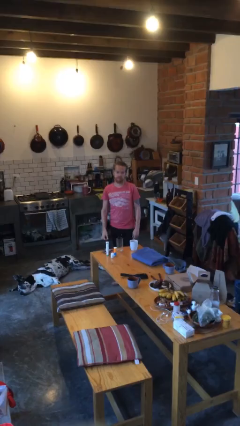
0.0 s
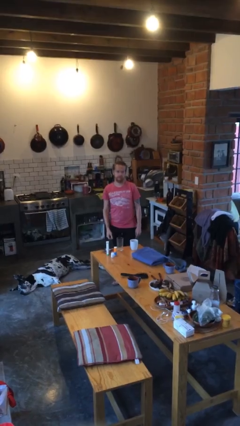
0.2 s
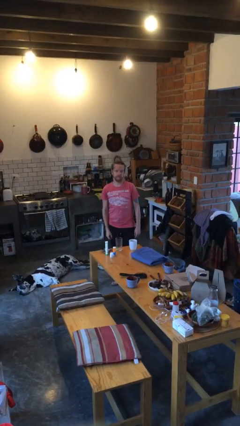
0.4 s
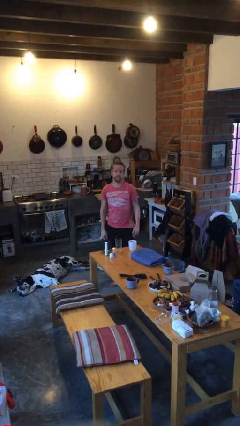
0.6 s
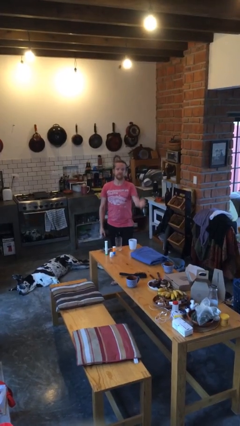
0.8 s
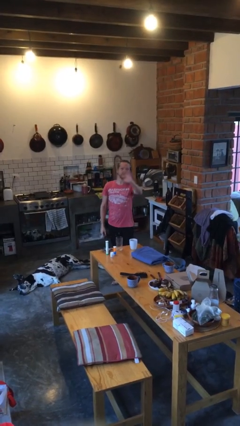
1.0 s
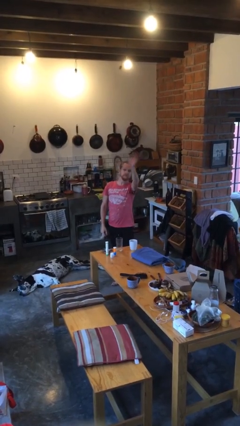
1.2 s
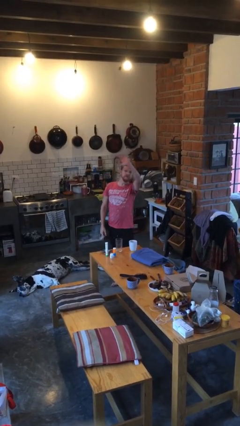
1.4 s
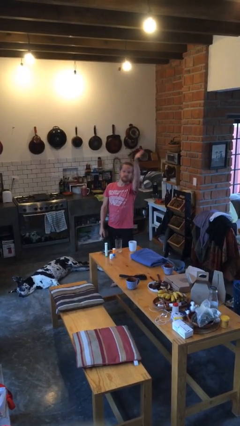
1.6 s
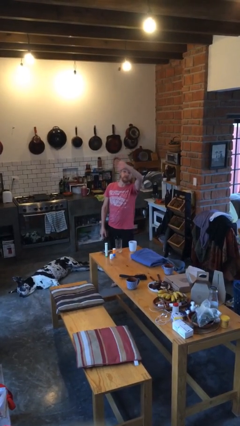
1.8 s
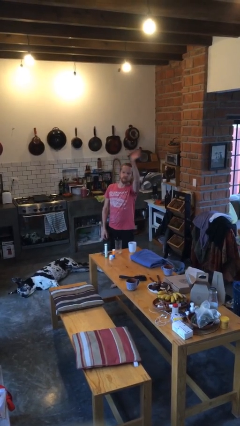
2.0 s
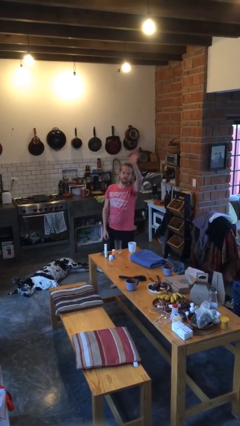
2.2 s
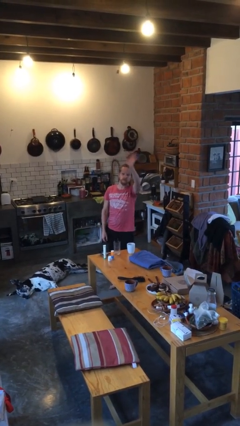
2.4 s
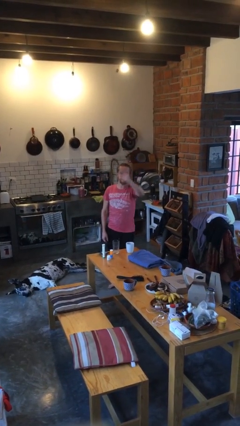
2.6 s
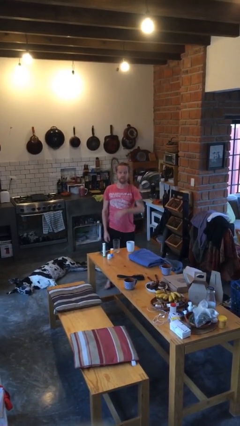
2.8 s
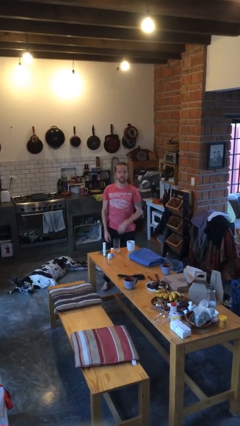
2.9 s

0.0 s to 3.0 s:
person waves at person

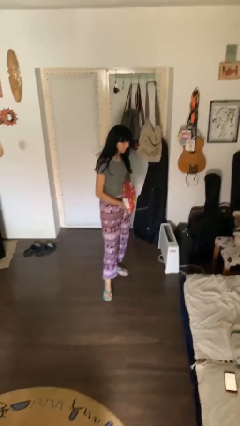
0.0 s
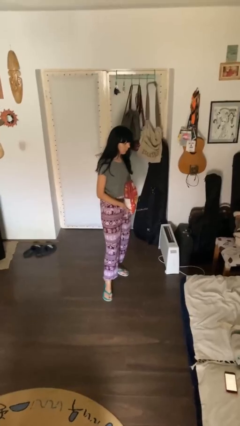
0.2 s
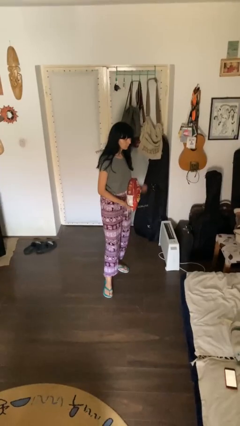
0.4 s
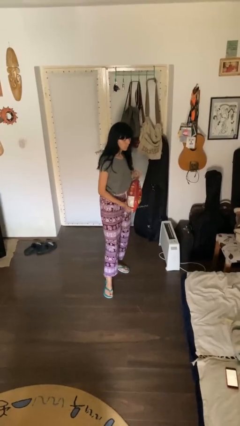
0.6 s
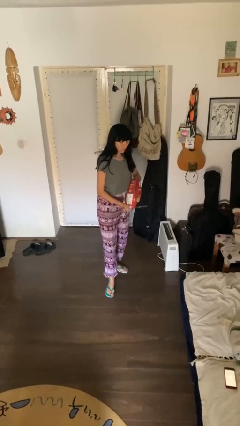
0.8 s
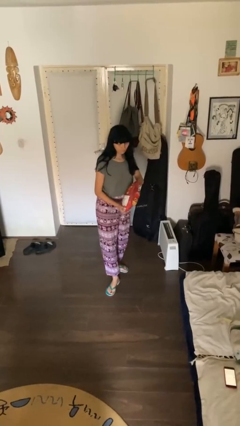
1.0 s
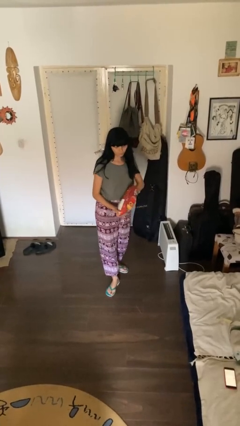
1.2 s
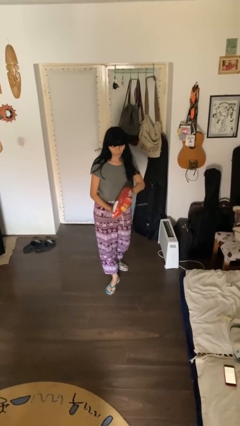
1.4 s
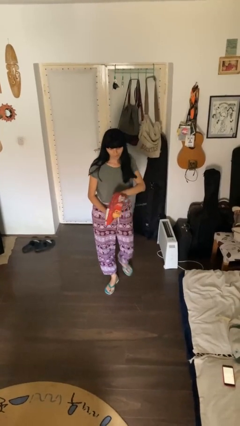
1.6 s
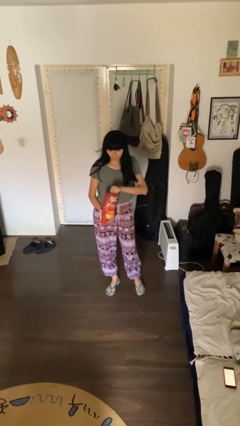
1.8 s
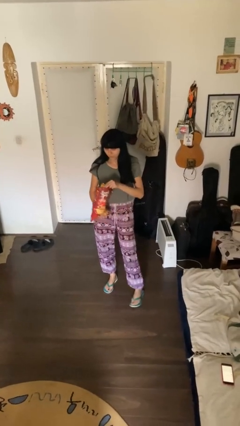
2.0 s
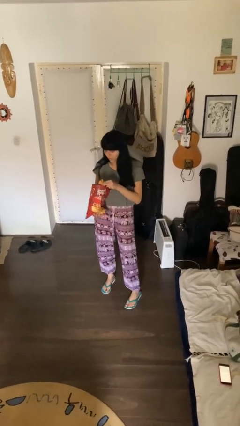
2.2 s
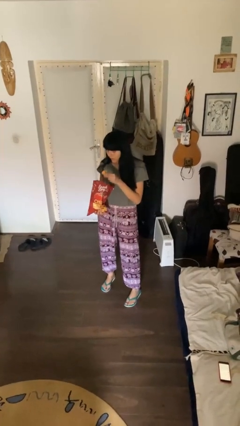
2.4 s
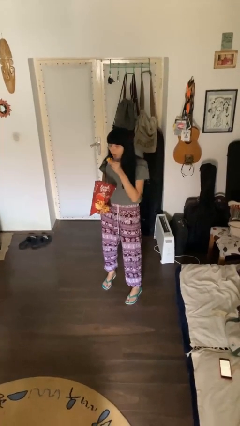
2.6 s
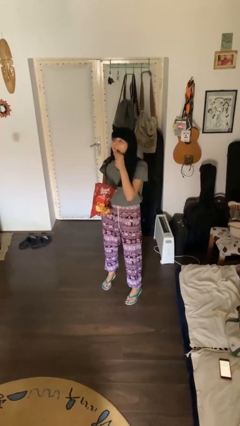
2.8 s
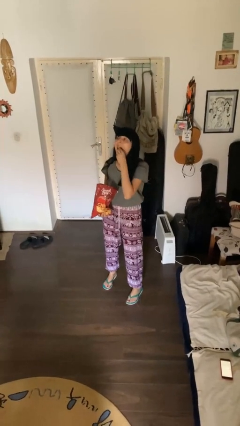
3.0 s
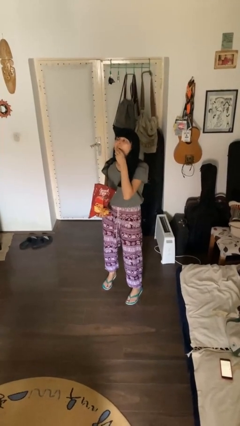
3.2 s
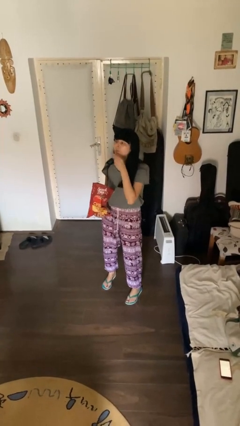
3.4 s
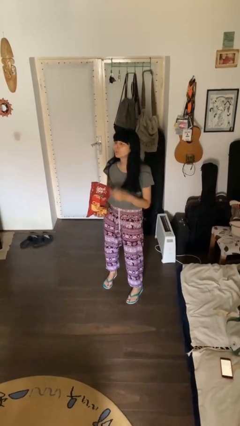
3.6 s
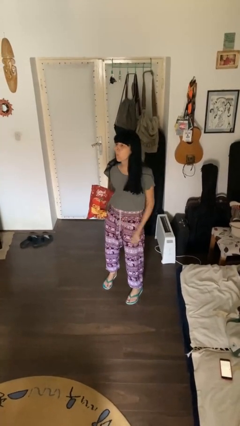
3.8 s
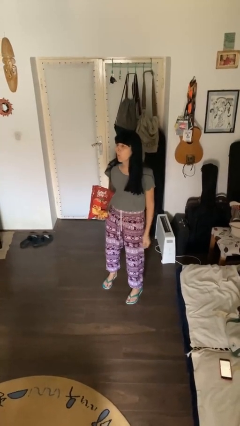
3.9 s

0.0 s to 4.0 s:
person eats snack from bag

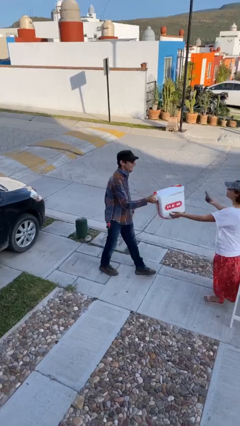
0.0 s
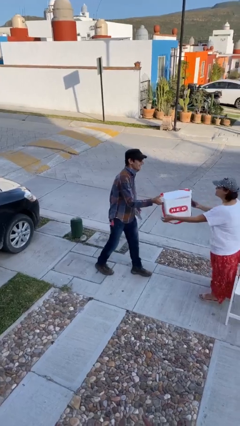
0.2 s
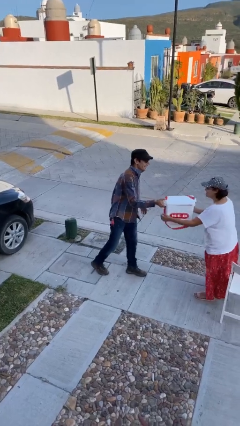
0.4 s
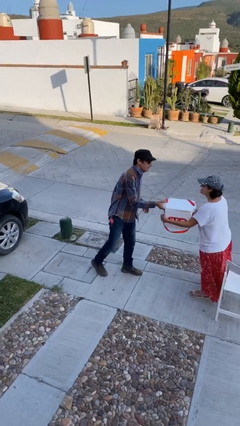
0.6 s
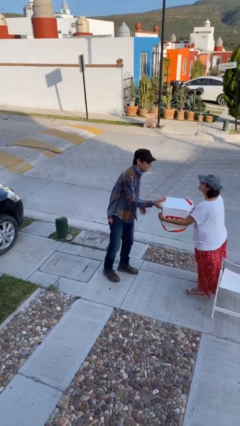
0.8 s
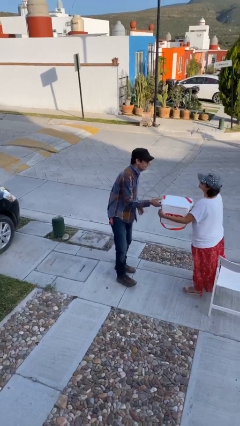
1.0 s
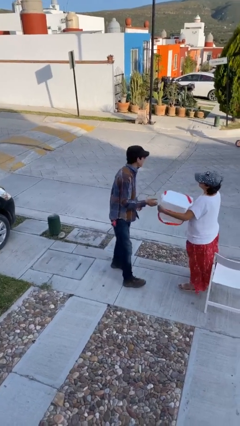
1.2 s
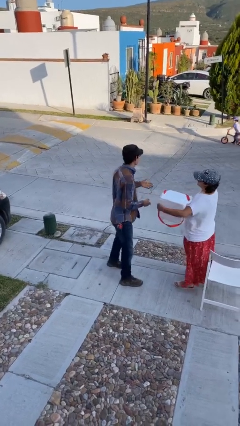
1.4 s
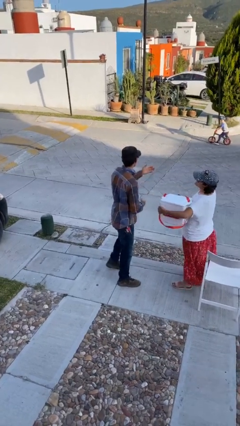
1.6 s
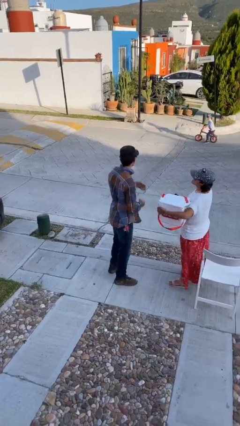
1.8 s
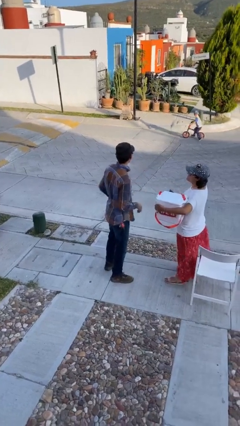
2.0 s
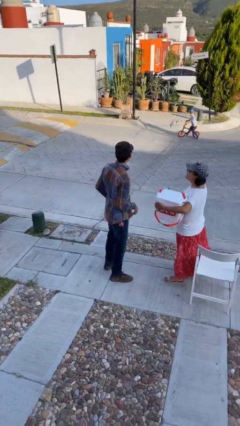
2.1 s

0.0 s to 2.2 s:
person transfers object to person

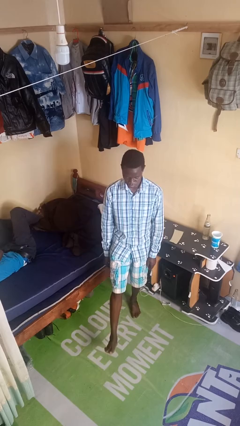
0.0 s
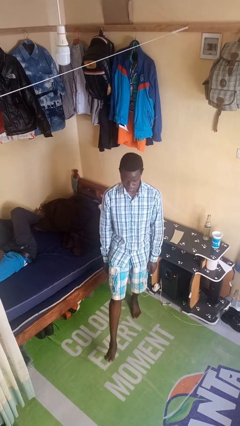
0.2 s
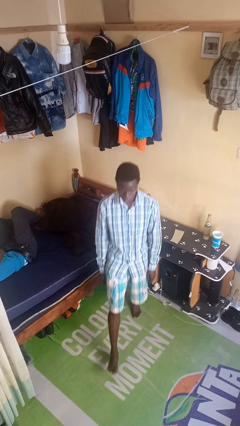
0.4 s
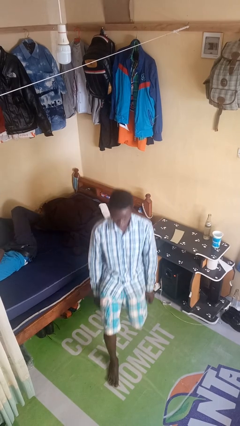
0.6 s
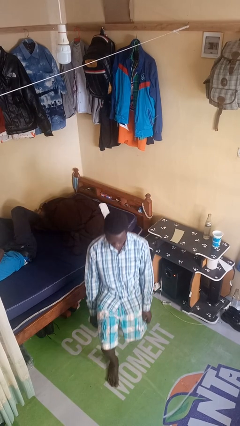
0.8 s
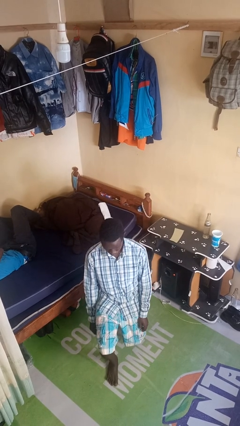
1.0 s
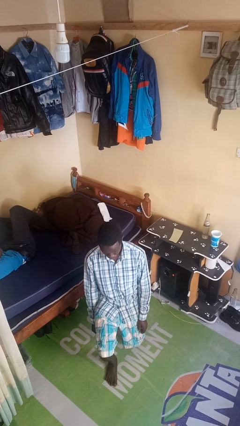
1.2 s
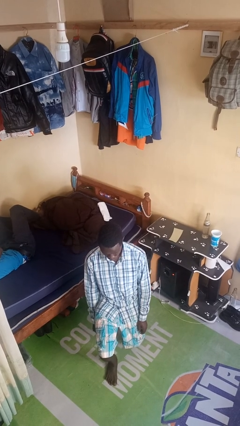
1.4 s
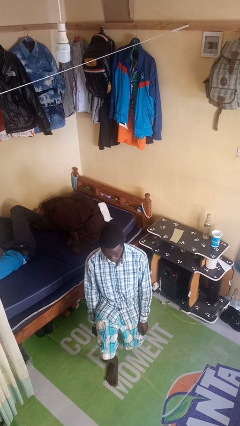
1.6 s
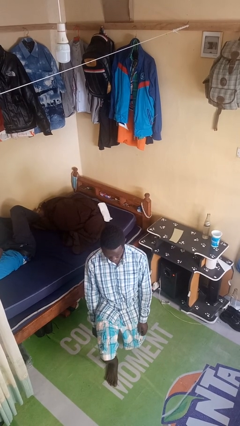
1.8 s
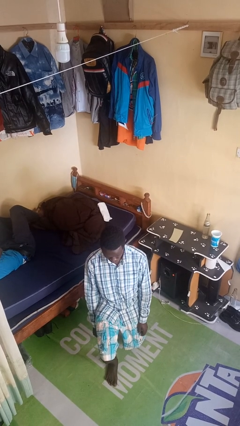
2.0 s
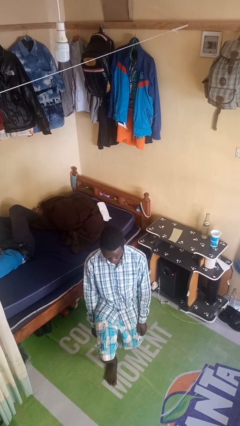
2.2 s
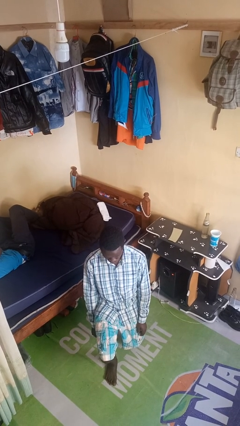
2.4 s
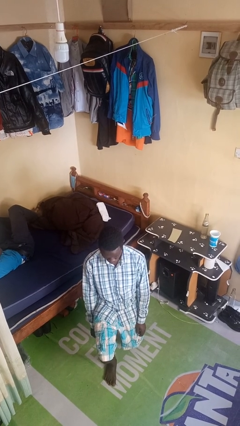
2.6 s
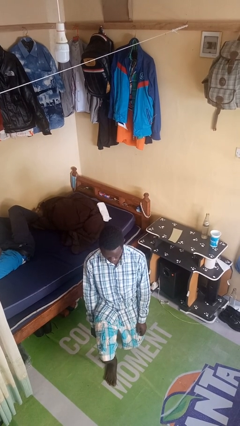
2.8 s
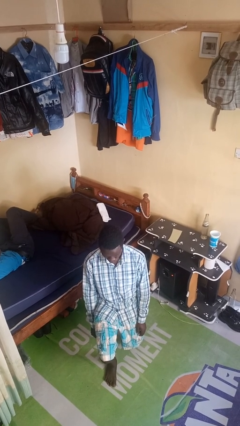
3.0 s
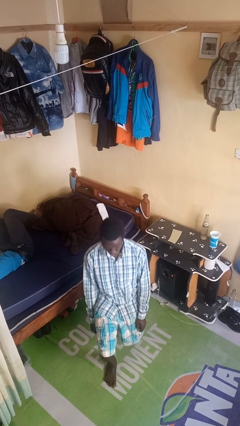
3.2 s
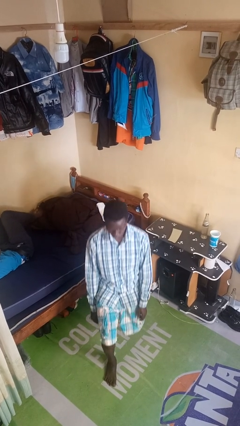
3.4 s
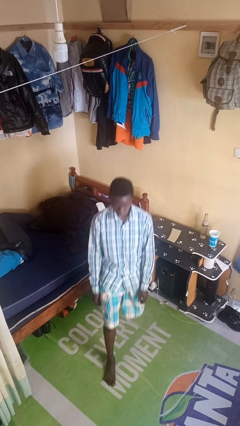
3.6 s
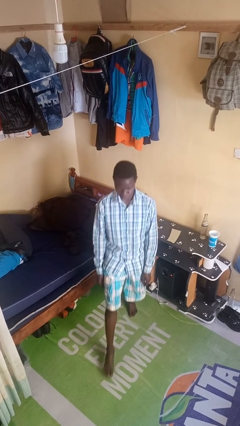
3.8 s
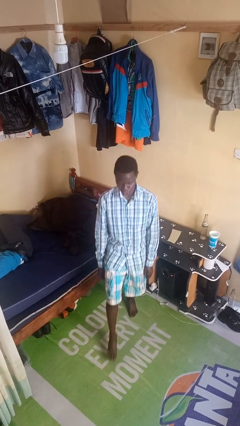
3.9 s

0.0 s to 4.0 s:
person exercises with lunges

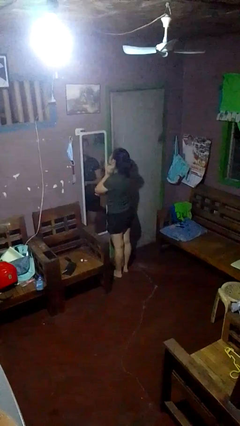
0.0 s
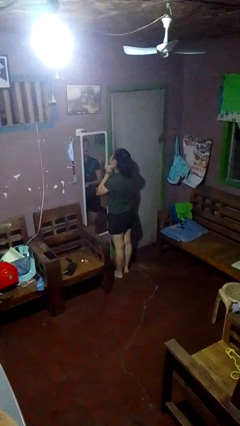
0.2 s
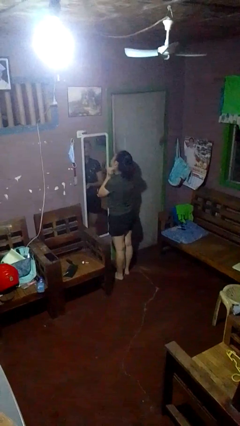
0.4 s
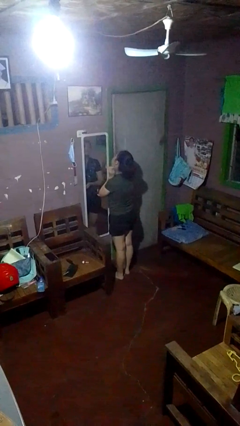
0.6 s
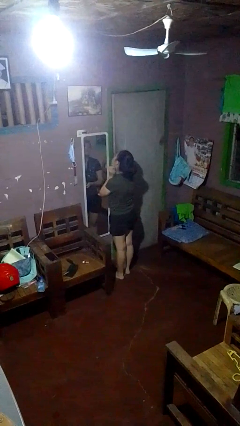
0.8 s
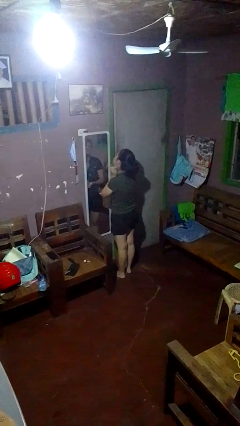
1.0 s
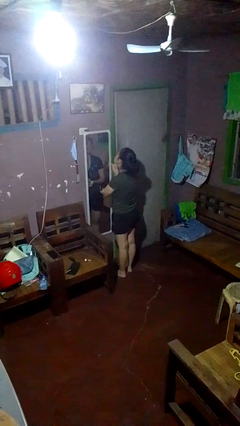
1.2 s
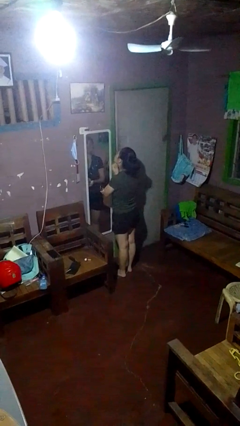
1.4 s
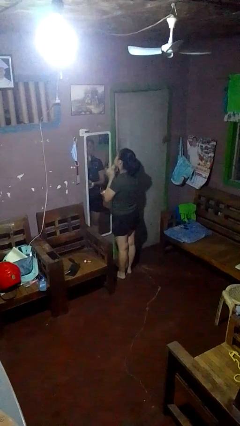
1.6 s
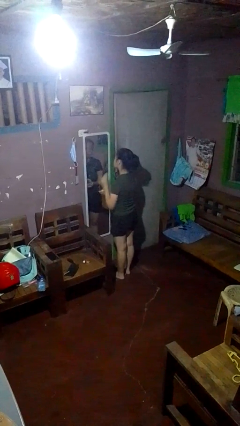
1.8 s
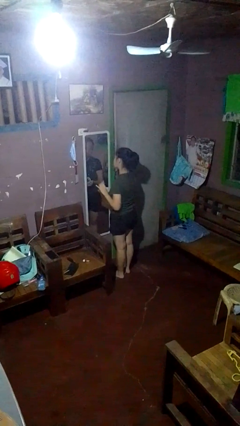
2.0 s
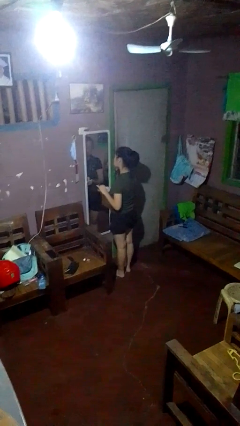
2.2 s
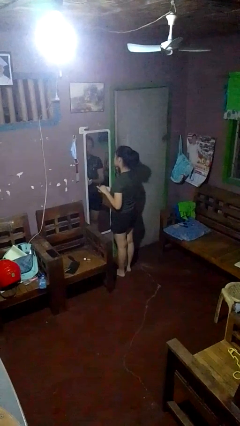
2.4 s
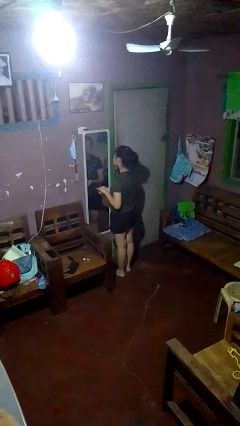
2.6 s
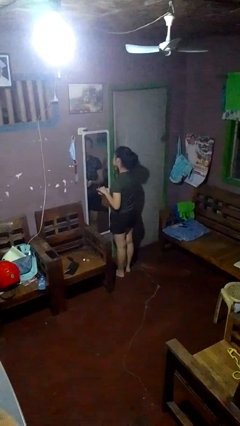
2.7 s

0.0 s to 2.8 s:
person applies foundation makeup

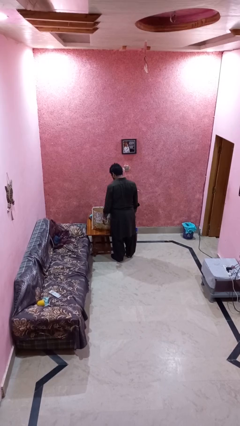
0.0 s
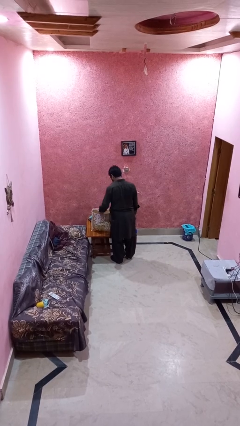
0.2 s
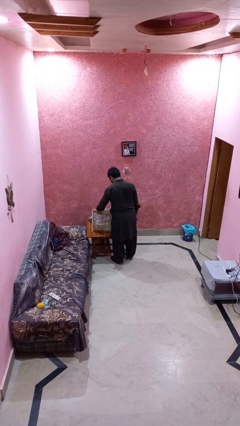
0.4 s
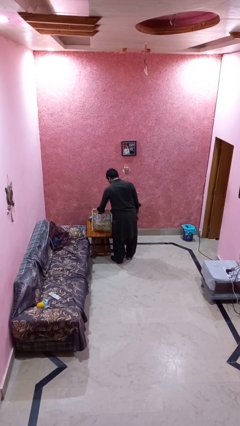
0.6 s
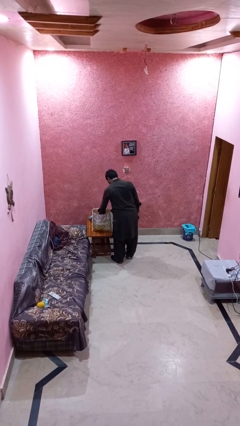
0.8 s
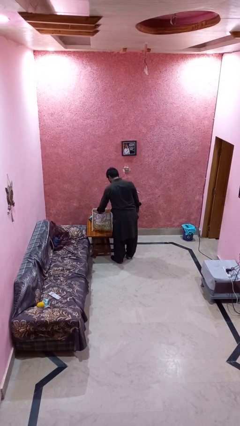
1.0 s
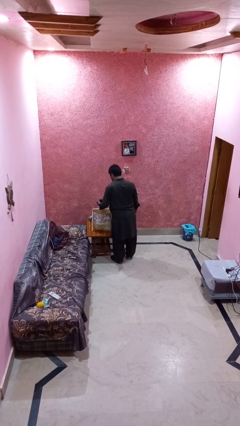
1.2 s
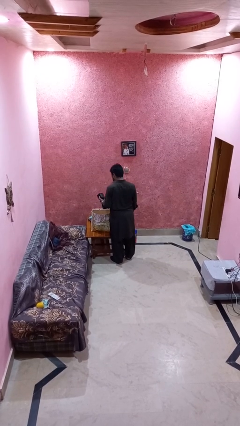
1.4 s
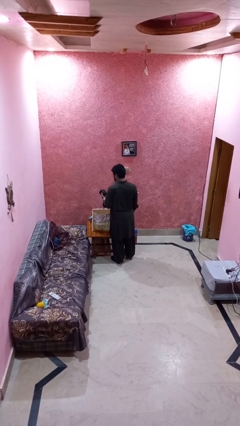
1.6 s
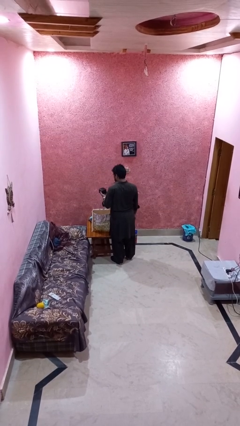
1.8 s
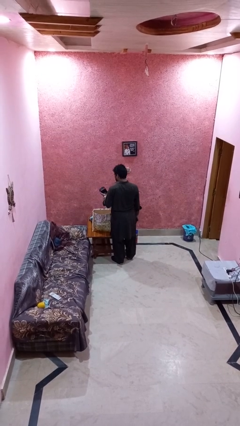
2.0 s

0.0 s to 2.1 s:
person takes object from bag
